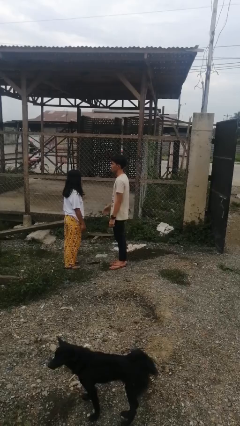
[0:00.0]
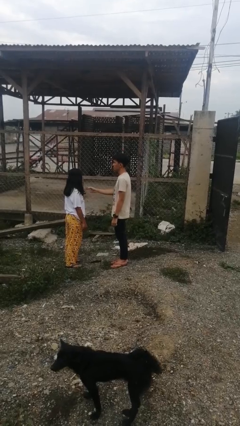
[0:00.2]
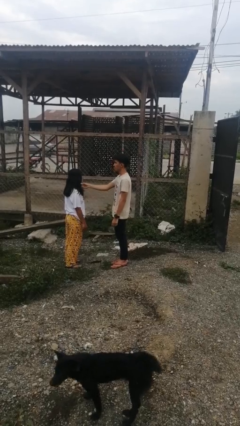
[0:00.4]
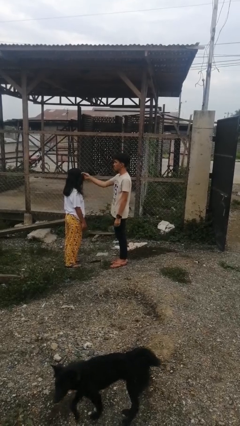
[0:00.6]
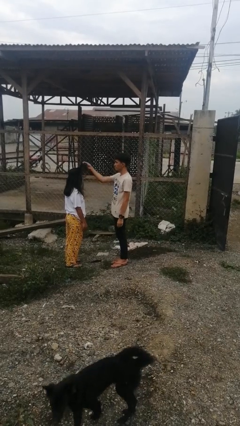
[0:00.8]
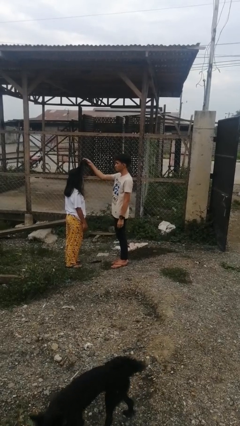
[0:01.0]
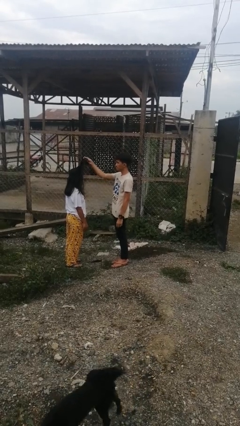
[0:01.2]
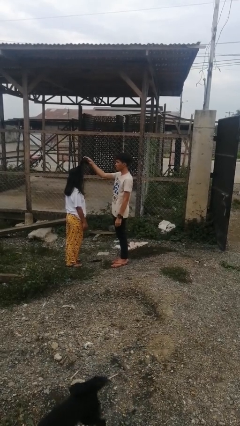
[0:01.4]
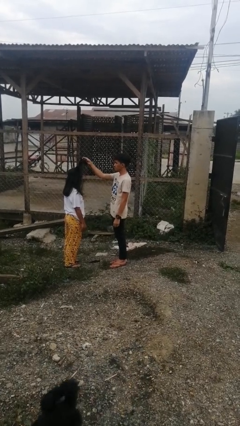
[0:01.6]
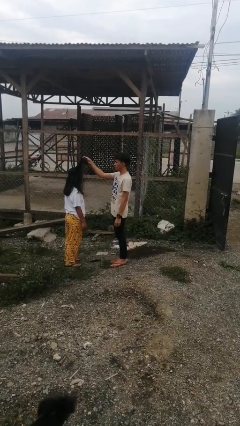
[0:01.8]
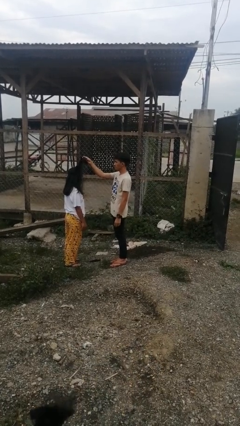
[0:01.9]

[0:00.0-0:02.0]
person grabs person by hair

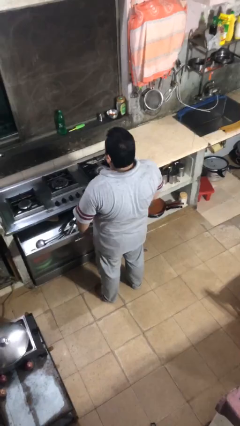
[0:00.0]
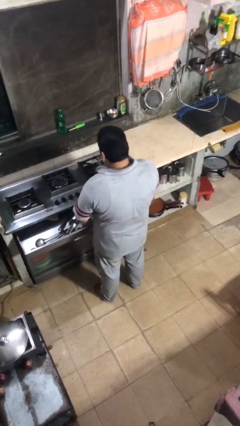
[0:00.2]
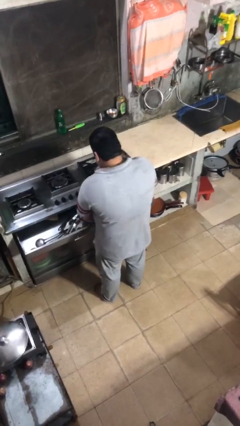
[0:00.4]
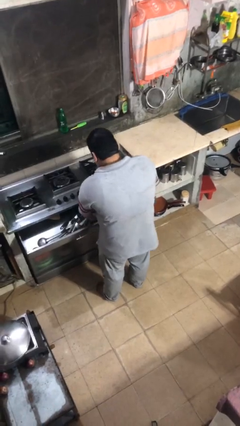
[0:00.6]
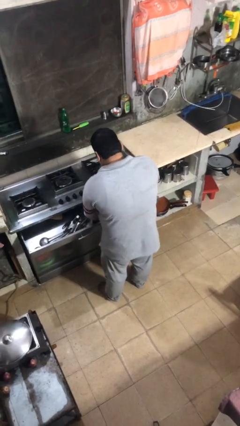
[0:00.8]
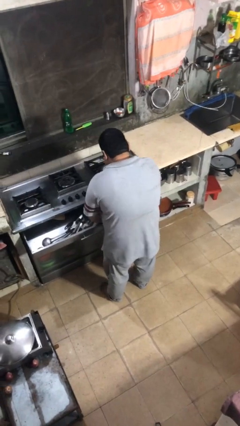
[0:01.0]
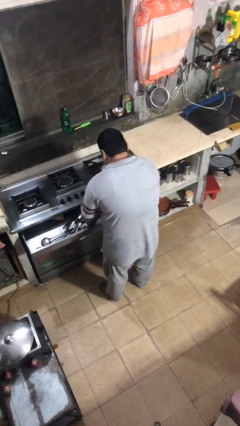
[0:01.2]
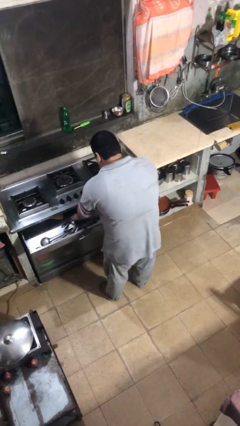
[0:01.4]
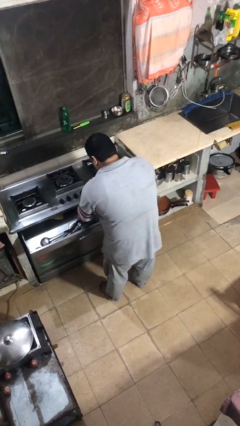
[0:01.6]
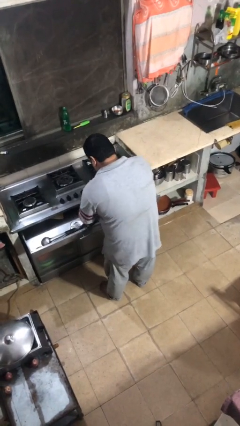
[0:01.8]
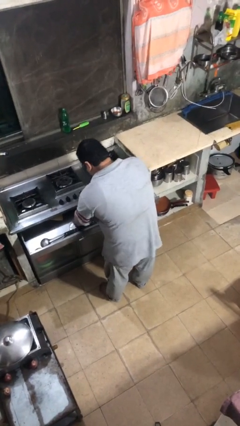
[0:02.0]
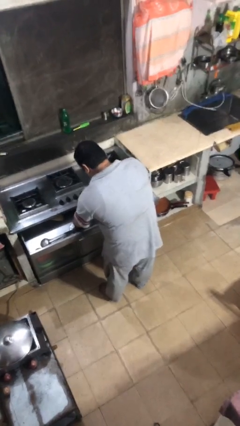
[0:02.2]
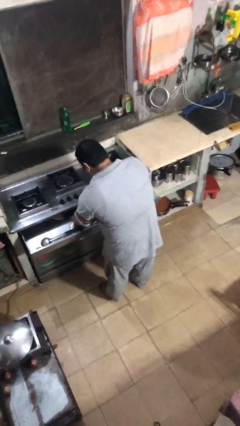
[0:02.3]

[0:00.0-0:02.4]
person searches in kitchen drawer

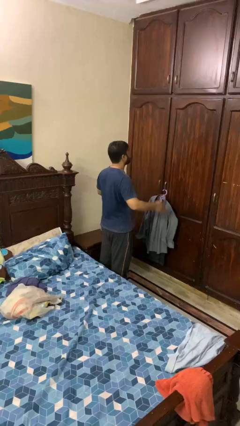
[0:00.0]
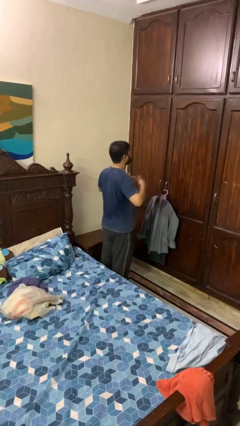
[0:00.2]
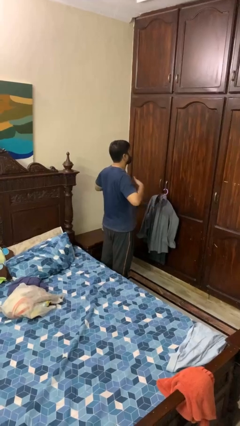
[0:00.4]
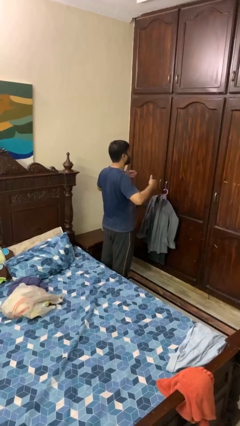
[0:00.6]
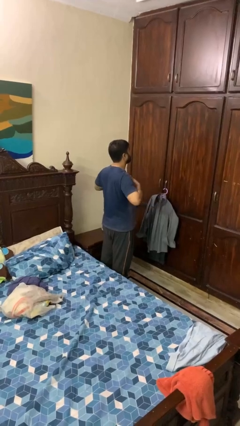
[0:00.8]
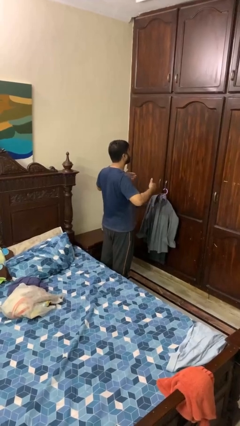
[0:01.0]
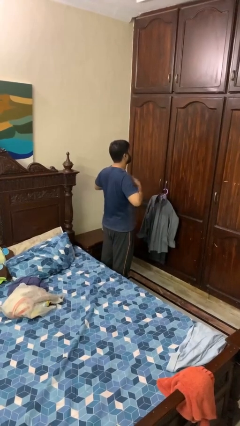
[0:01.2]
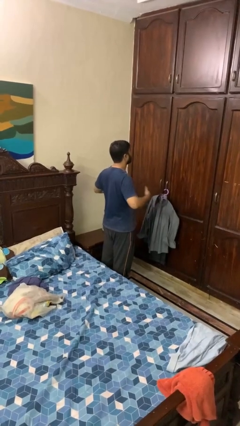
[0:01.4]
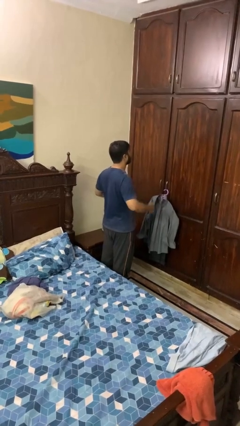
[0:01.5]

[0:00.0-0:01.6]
person drums on chest

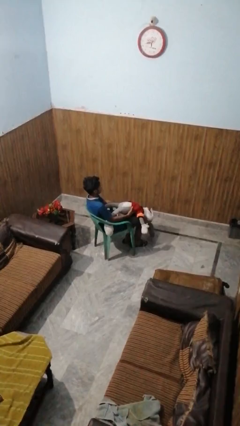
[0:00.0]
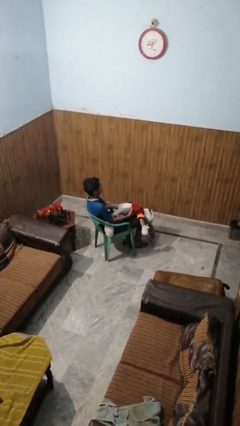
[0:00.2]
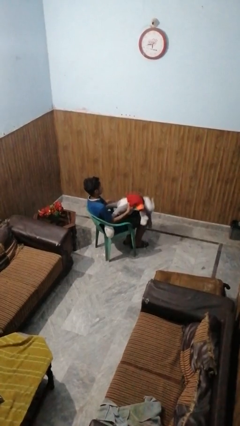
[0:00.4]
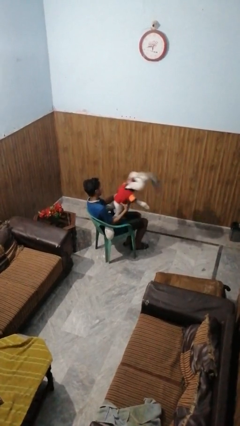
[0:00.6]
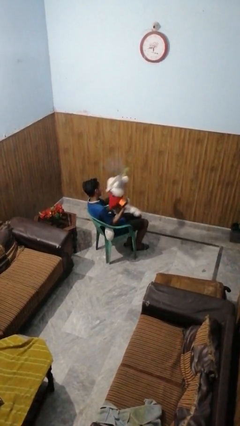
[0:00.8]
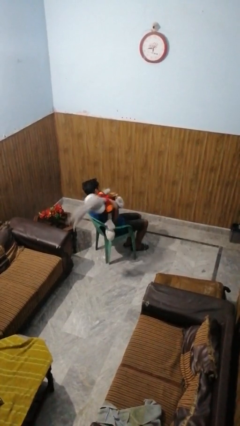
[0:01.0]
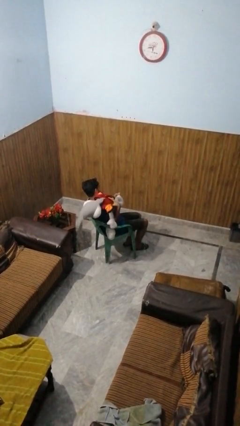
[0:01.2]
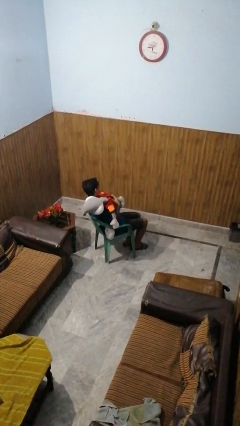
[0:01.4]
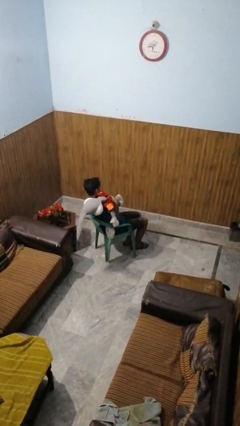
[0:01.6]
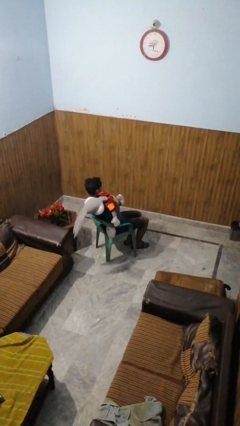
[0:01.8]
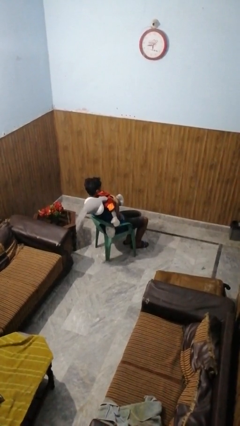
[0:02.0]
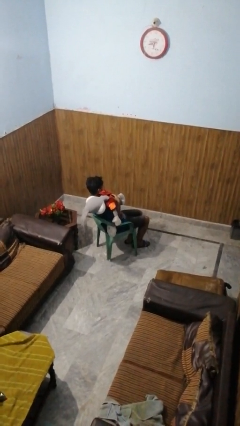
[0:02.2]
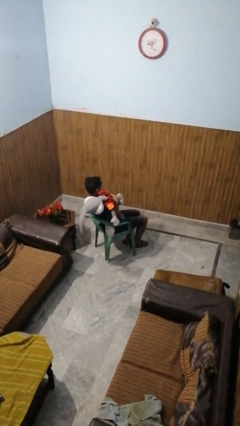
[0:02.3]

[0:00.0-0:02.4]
person hugs stuffed animal

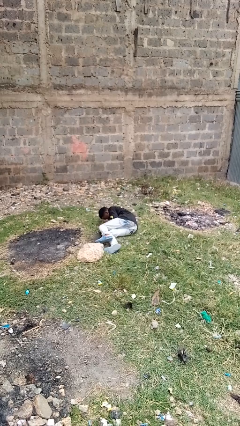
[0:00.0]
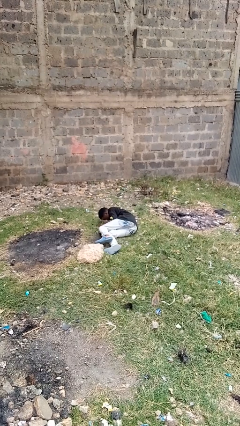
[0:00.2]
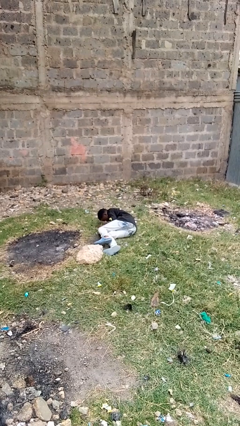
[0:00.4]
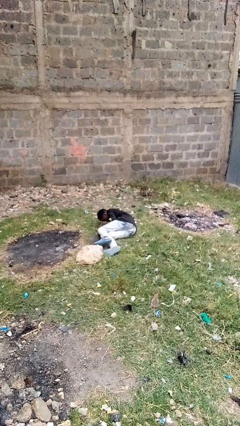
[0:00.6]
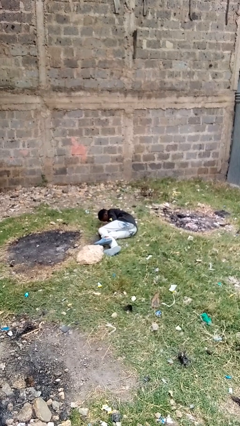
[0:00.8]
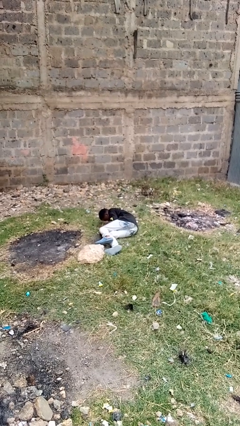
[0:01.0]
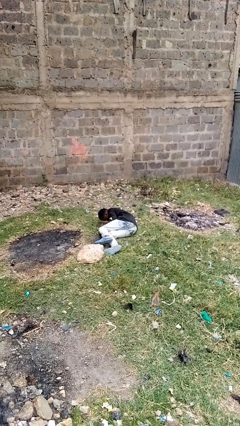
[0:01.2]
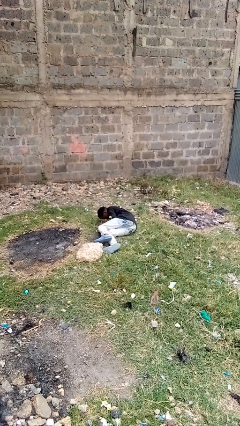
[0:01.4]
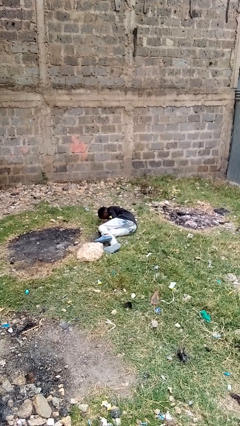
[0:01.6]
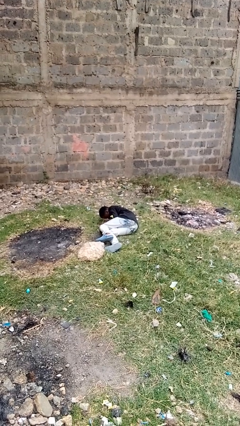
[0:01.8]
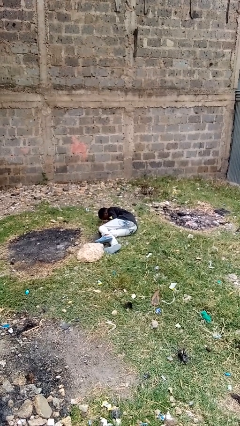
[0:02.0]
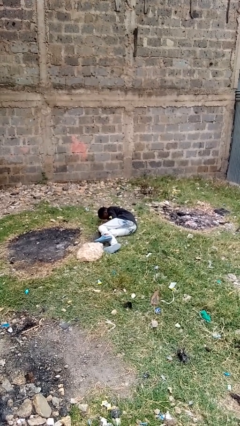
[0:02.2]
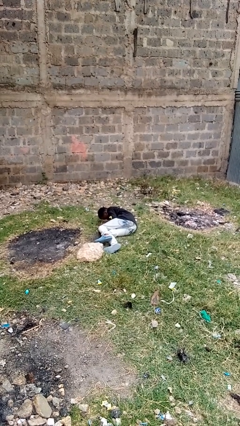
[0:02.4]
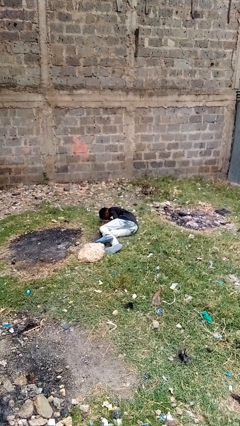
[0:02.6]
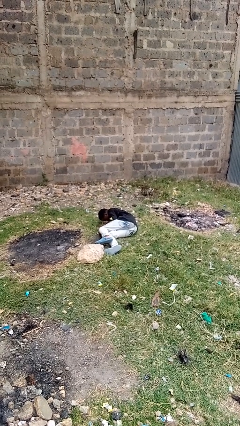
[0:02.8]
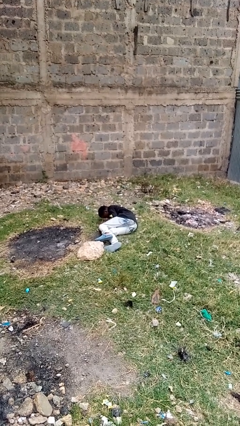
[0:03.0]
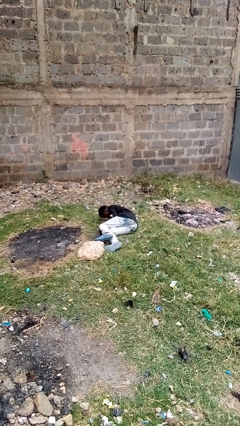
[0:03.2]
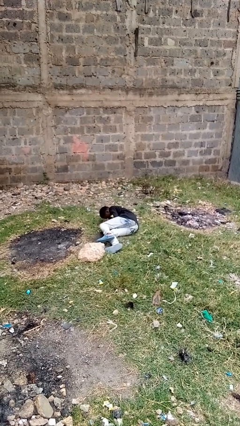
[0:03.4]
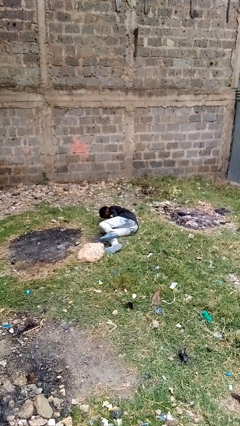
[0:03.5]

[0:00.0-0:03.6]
person lies down on floor

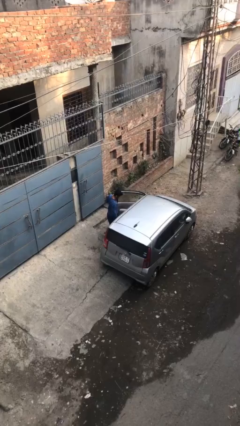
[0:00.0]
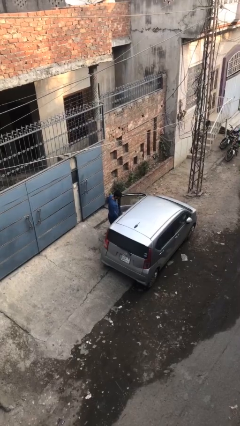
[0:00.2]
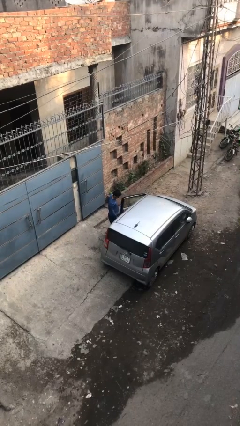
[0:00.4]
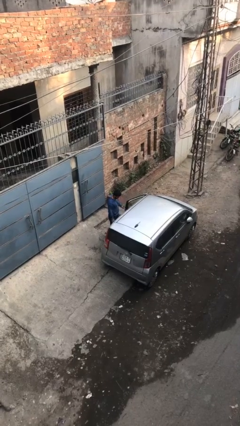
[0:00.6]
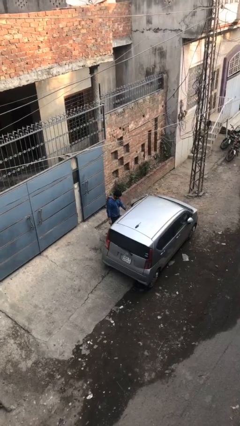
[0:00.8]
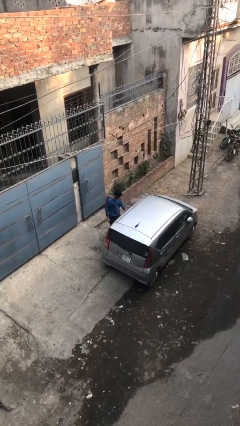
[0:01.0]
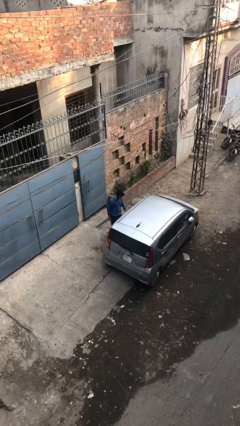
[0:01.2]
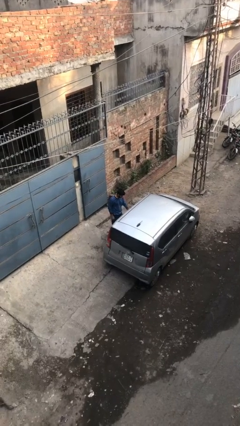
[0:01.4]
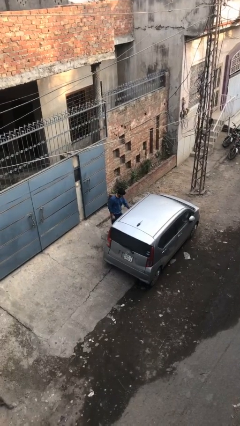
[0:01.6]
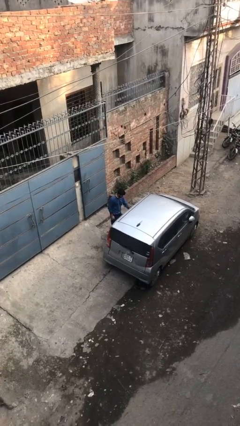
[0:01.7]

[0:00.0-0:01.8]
person closes car door

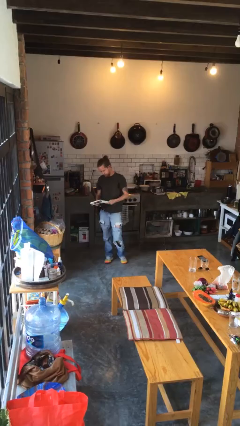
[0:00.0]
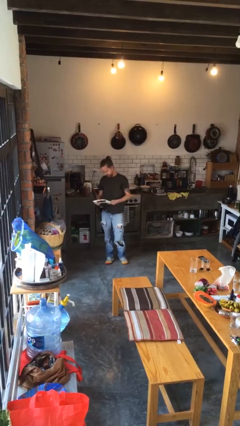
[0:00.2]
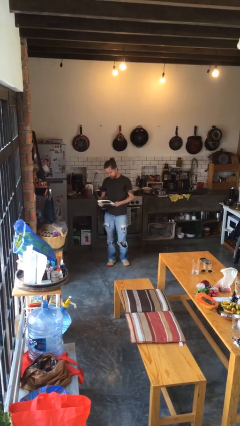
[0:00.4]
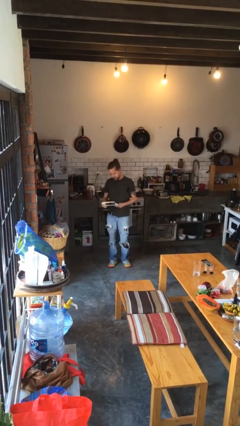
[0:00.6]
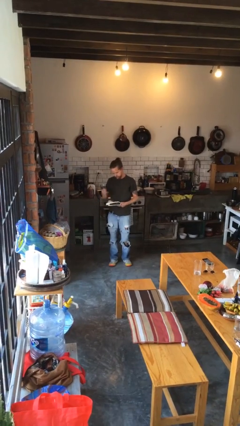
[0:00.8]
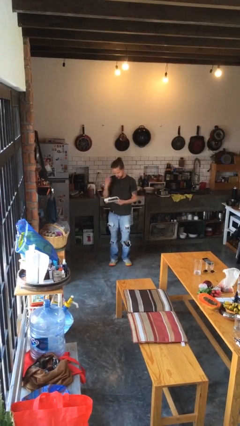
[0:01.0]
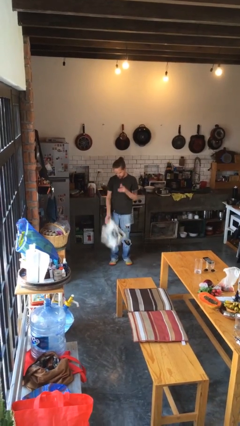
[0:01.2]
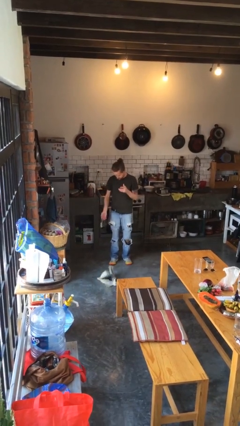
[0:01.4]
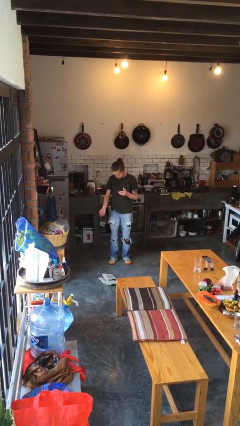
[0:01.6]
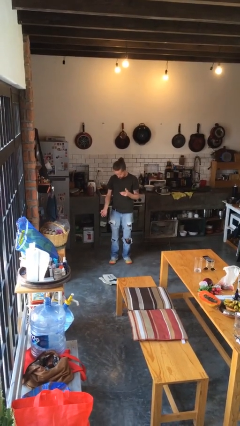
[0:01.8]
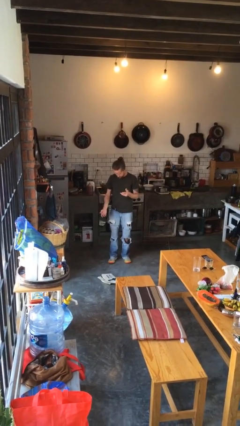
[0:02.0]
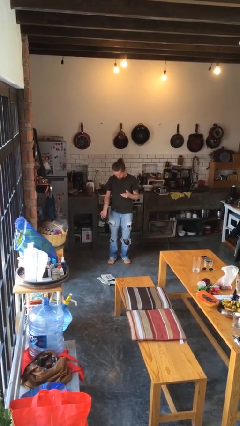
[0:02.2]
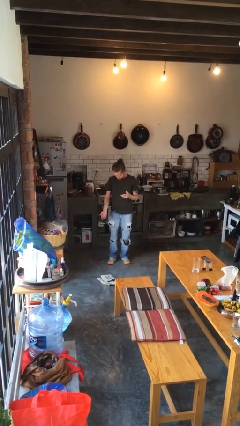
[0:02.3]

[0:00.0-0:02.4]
person drops object

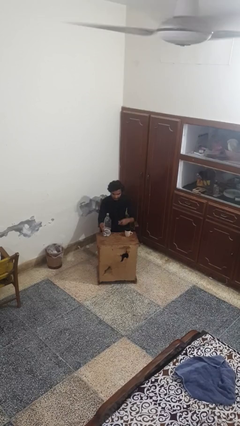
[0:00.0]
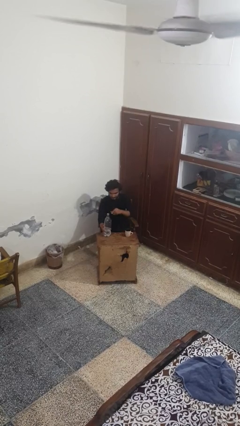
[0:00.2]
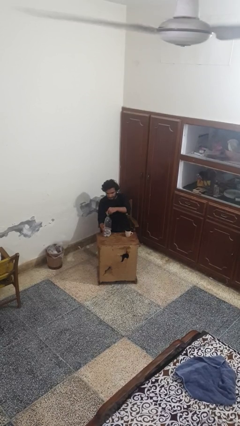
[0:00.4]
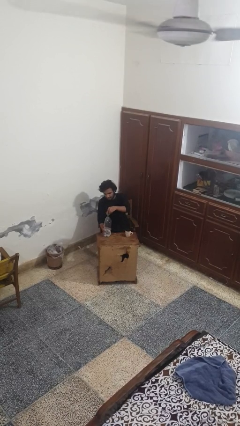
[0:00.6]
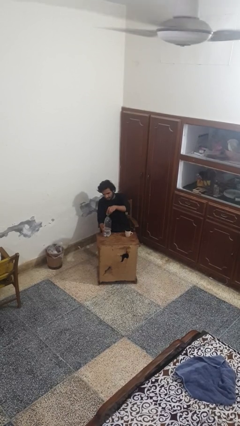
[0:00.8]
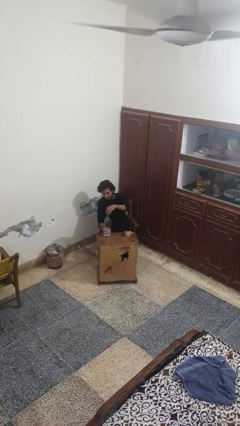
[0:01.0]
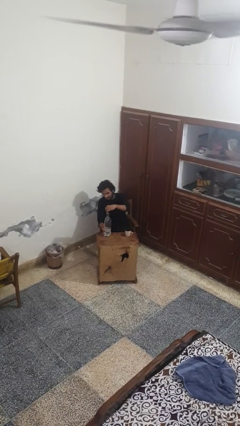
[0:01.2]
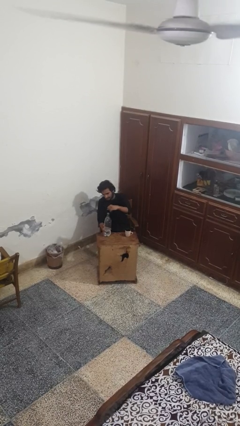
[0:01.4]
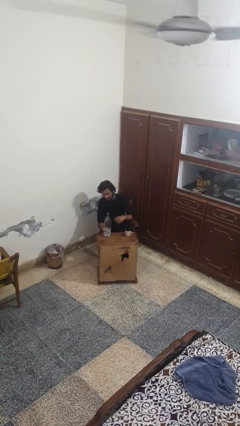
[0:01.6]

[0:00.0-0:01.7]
person screws lid to bottle
